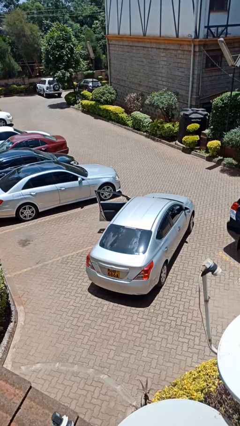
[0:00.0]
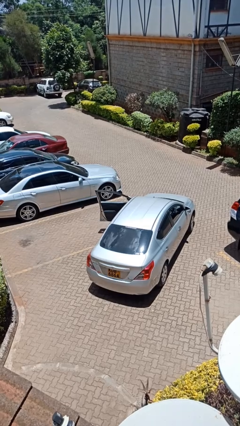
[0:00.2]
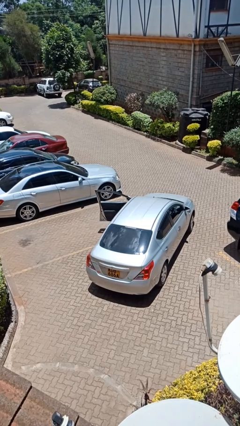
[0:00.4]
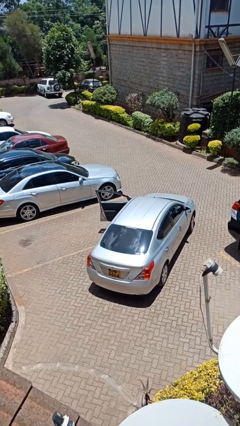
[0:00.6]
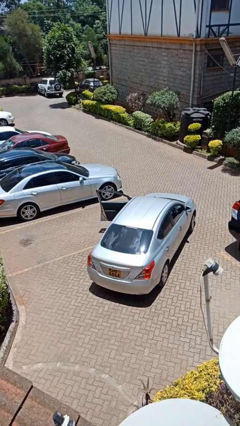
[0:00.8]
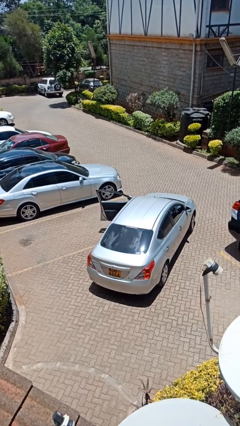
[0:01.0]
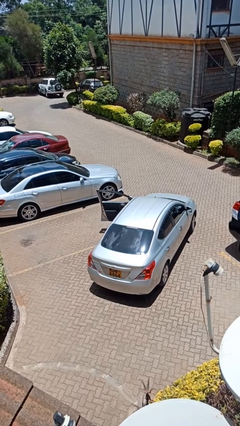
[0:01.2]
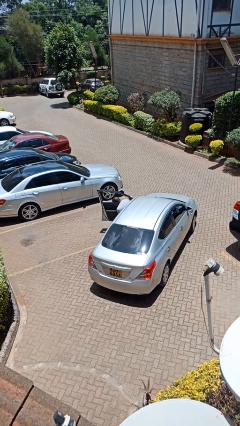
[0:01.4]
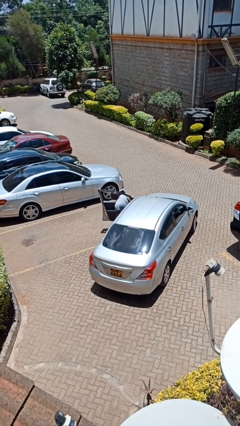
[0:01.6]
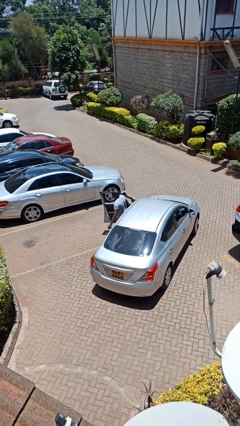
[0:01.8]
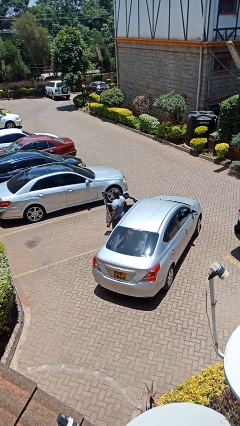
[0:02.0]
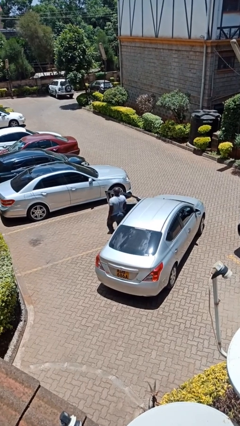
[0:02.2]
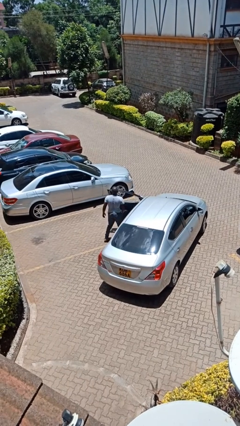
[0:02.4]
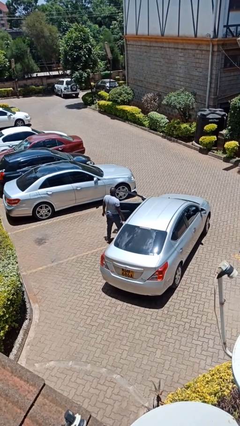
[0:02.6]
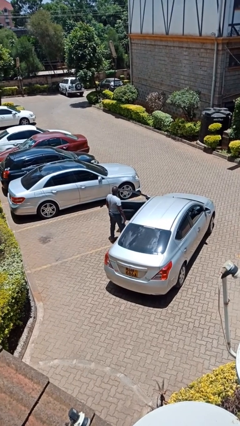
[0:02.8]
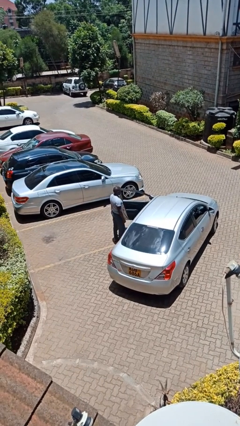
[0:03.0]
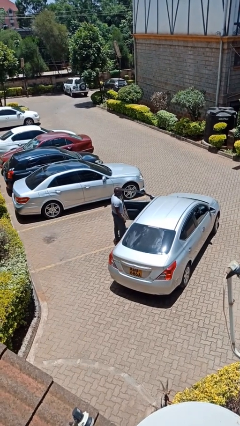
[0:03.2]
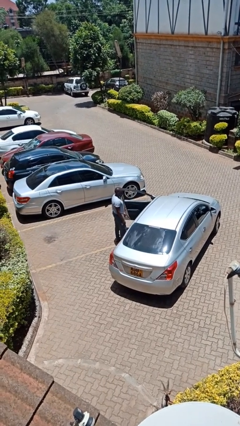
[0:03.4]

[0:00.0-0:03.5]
person exits car

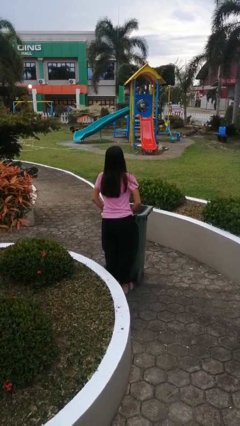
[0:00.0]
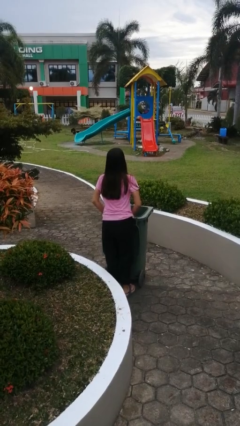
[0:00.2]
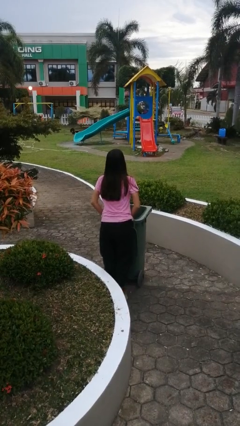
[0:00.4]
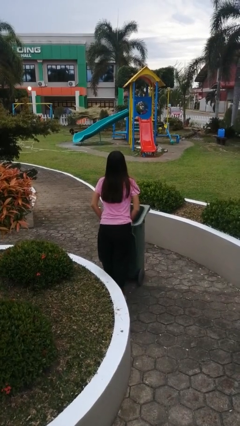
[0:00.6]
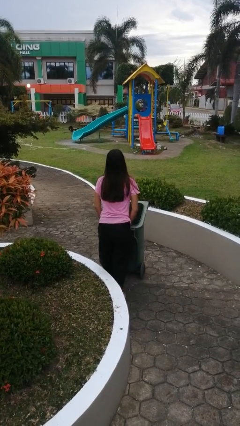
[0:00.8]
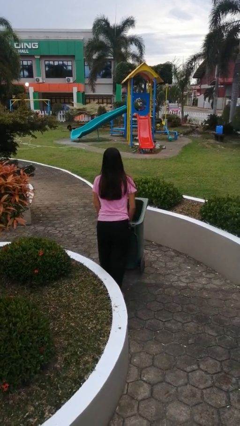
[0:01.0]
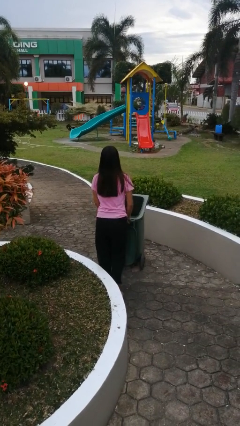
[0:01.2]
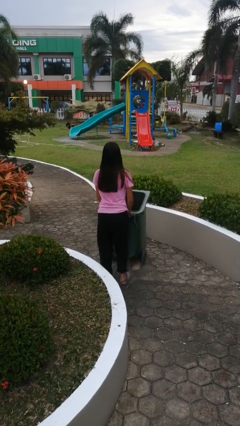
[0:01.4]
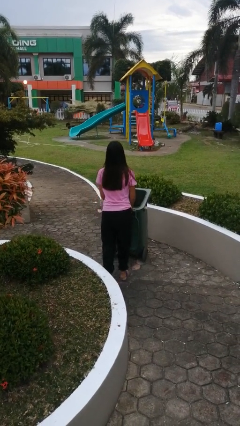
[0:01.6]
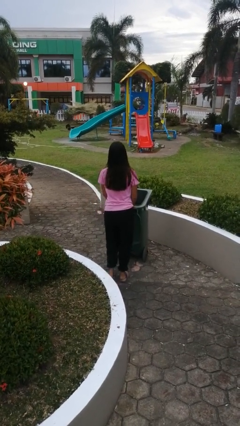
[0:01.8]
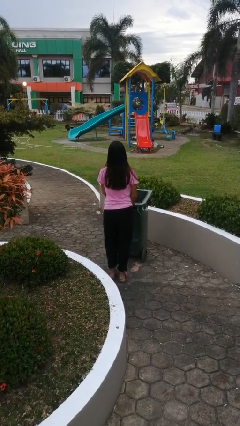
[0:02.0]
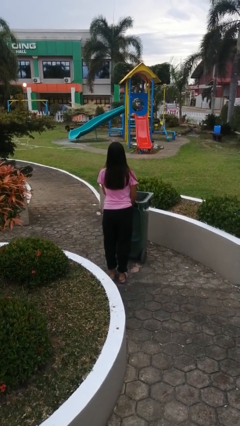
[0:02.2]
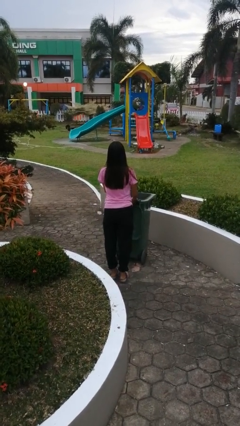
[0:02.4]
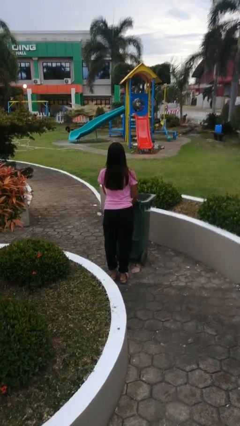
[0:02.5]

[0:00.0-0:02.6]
person pushes wheeled trashcan

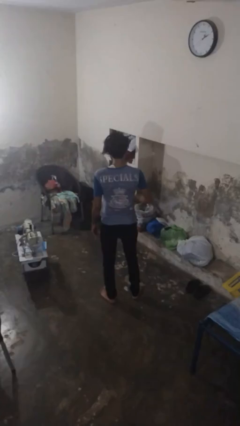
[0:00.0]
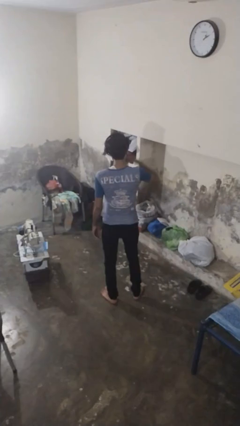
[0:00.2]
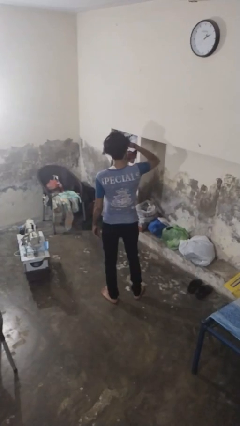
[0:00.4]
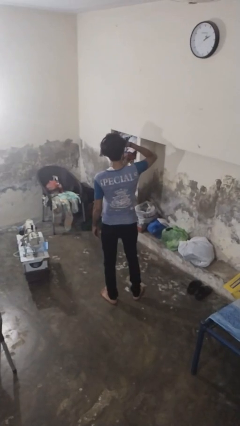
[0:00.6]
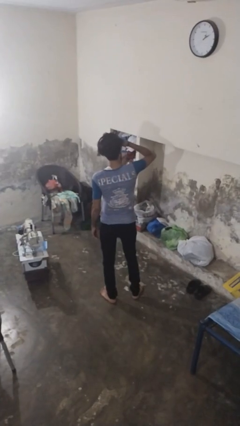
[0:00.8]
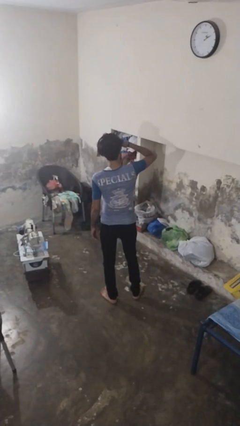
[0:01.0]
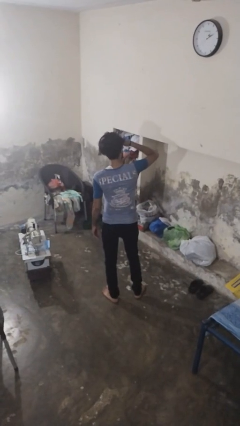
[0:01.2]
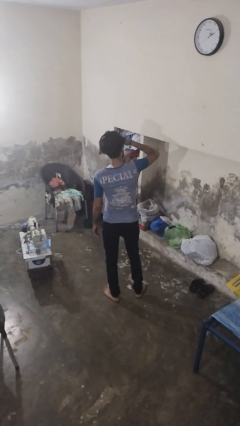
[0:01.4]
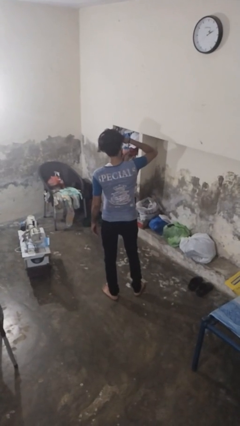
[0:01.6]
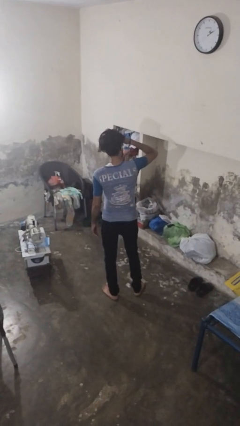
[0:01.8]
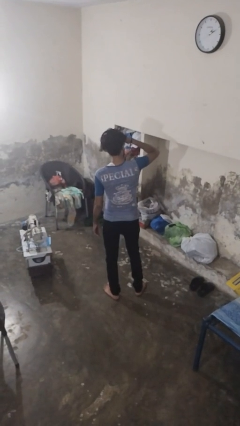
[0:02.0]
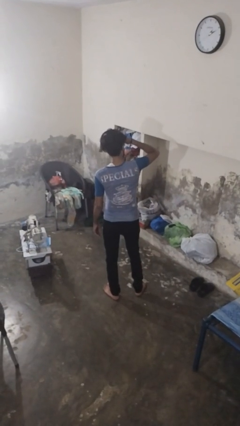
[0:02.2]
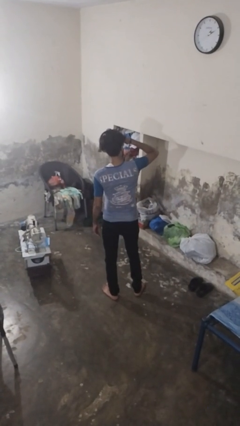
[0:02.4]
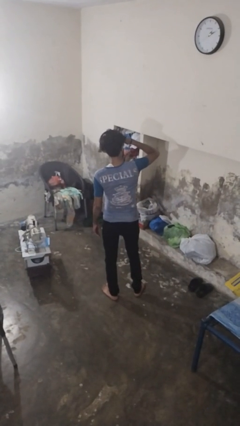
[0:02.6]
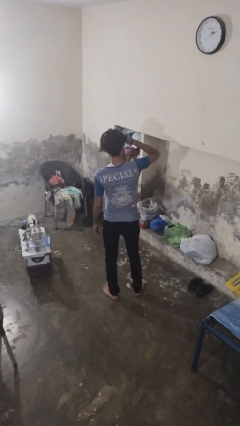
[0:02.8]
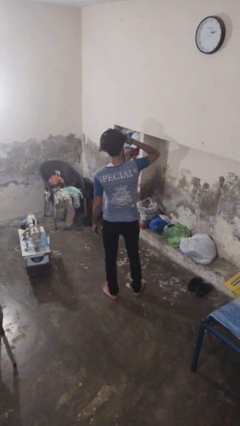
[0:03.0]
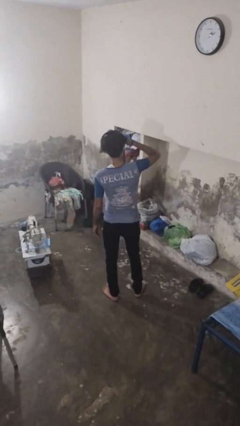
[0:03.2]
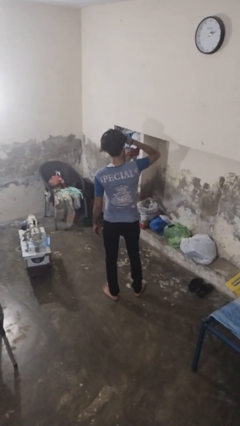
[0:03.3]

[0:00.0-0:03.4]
person shades eyes

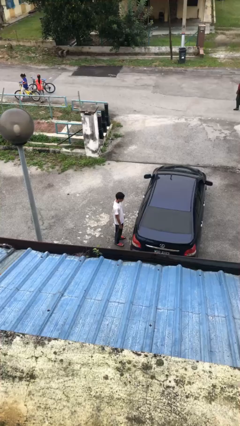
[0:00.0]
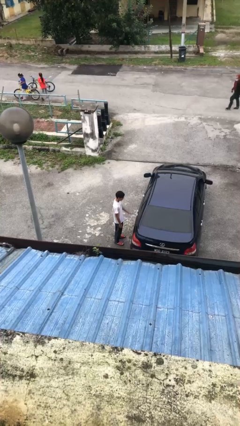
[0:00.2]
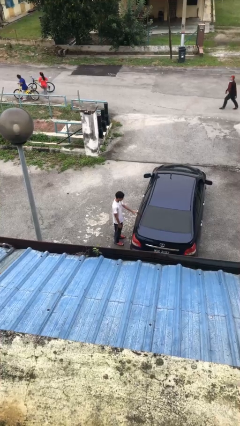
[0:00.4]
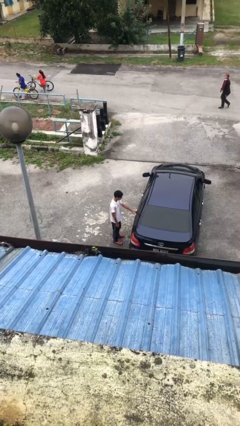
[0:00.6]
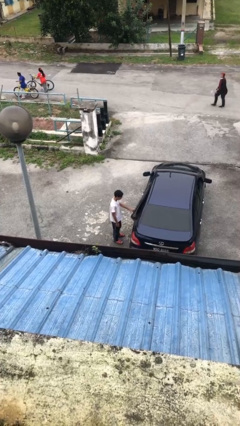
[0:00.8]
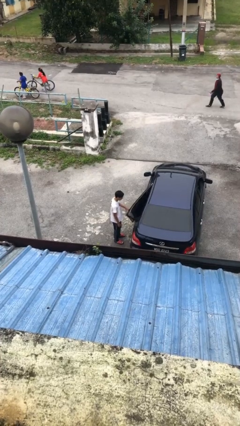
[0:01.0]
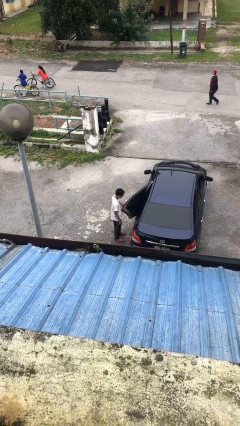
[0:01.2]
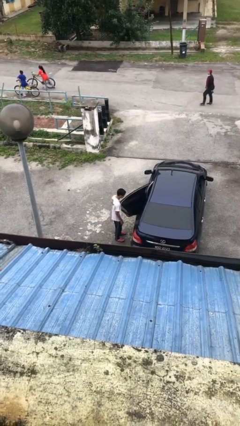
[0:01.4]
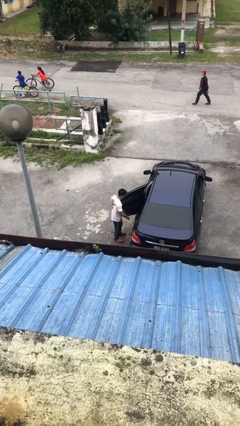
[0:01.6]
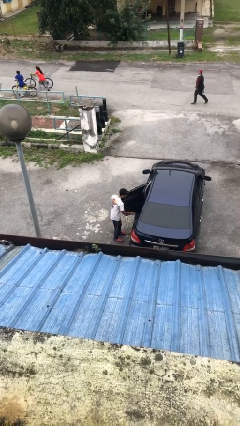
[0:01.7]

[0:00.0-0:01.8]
person opens car door

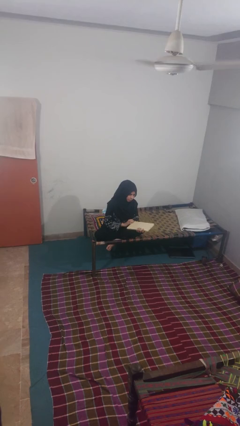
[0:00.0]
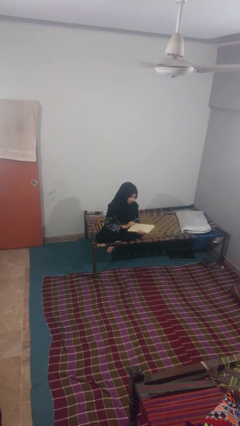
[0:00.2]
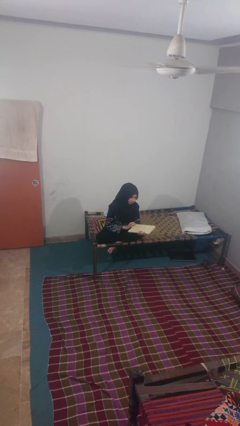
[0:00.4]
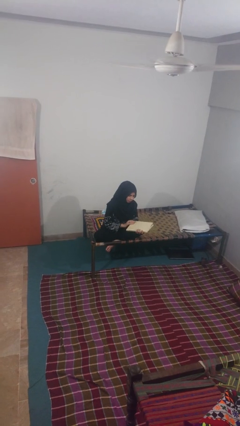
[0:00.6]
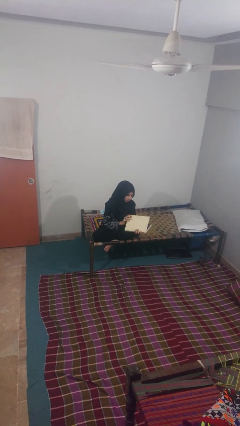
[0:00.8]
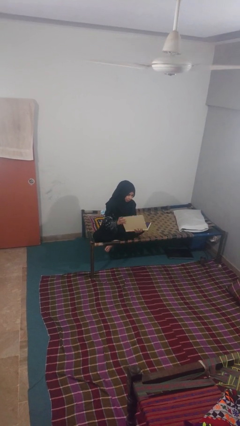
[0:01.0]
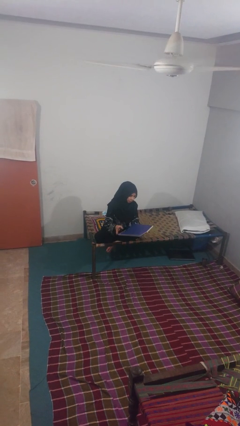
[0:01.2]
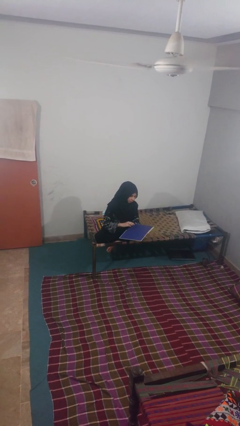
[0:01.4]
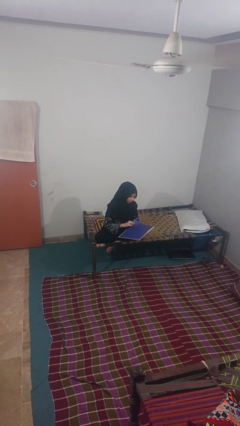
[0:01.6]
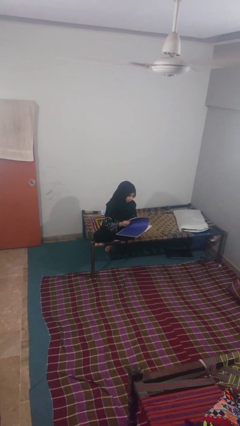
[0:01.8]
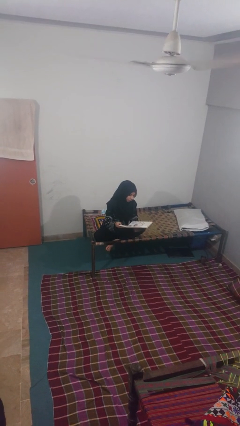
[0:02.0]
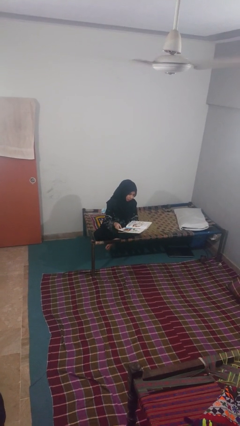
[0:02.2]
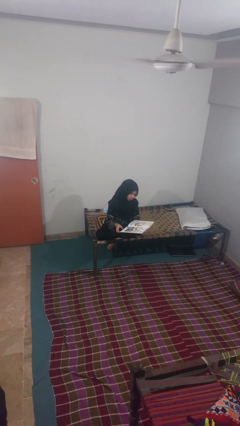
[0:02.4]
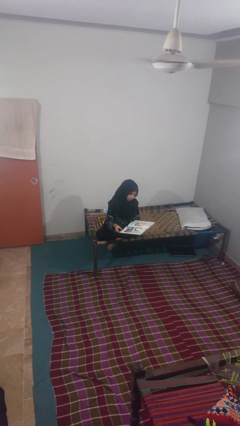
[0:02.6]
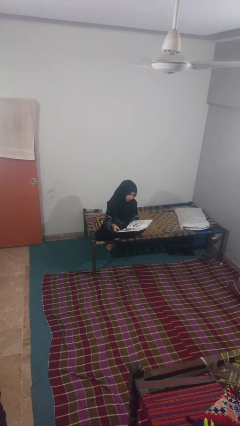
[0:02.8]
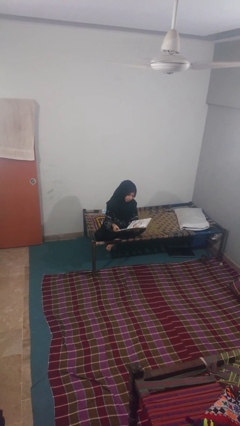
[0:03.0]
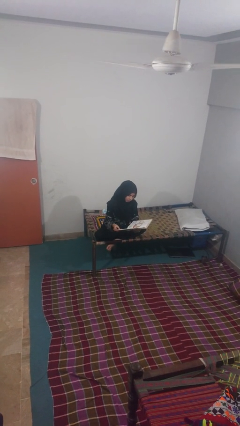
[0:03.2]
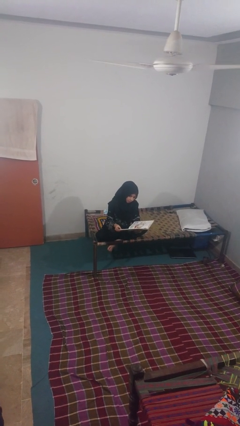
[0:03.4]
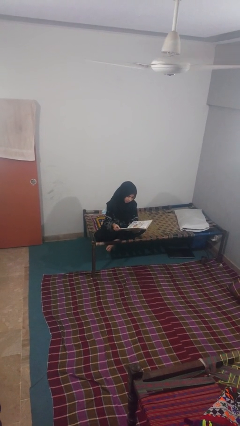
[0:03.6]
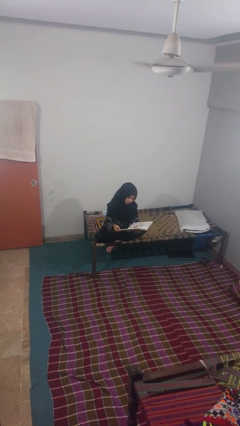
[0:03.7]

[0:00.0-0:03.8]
person reads magazine

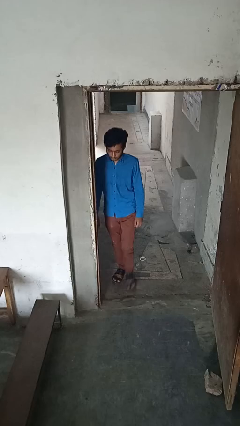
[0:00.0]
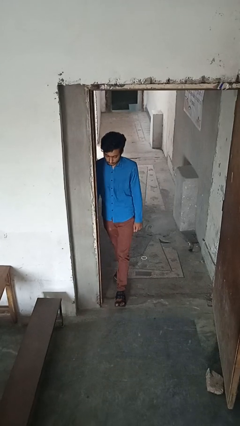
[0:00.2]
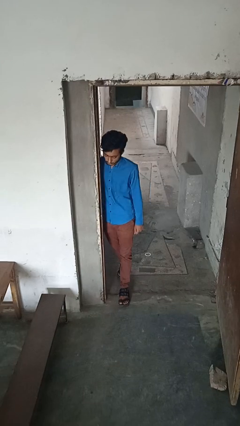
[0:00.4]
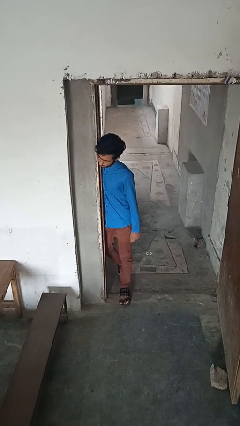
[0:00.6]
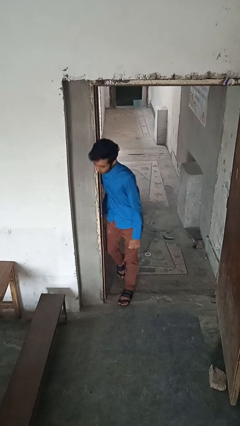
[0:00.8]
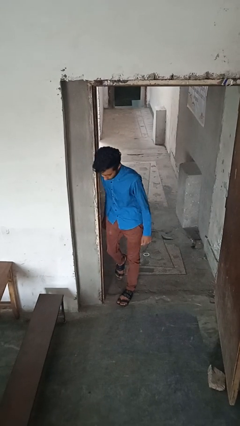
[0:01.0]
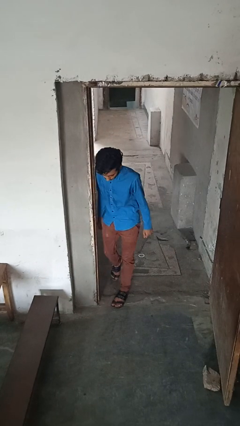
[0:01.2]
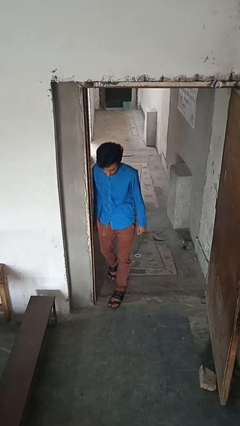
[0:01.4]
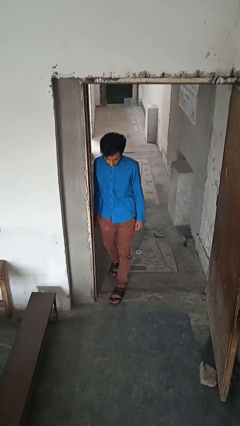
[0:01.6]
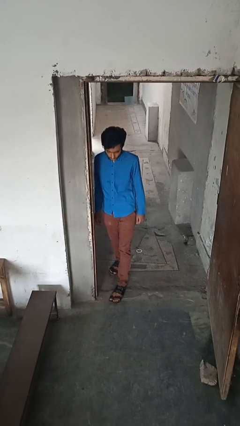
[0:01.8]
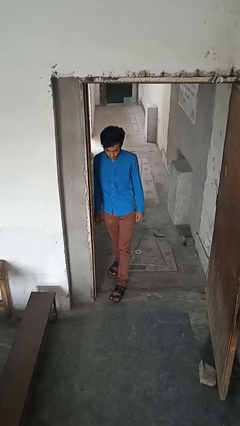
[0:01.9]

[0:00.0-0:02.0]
person bumps into wall

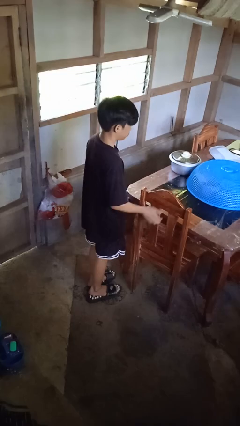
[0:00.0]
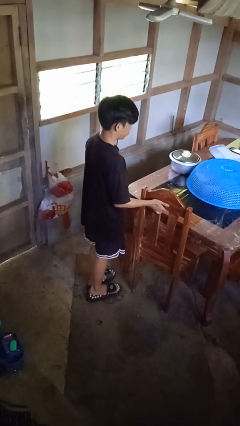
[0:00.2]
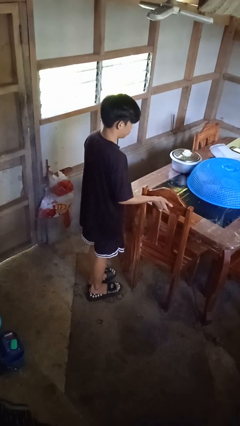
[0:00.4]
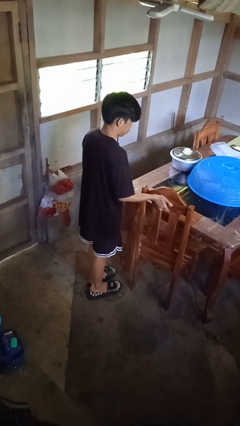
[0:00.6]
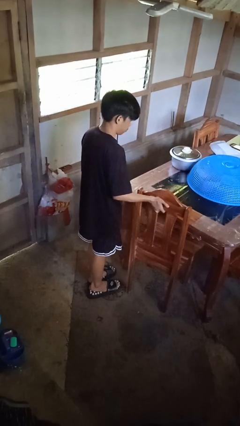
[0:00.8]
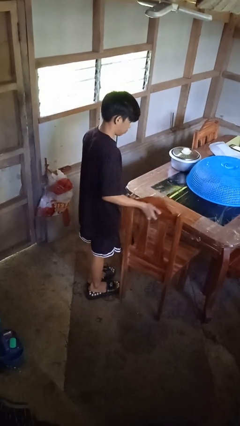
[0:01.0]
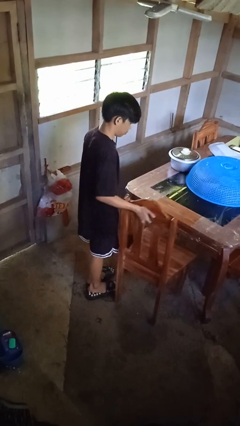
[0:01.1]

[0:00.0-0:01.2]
person pulls out chair
